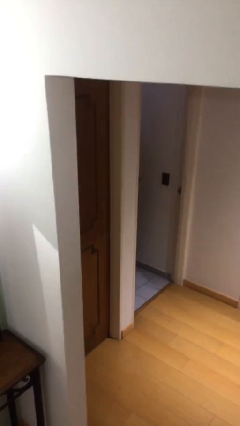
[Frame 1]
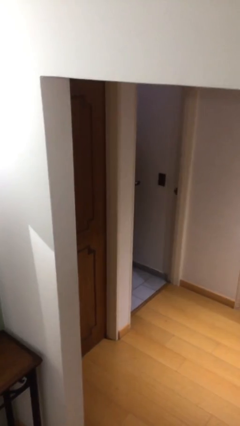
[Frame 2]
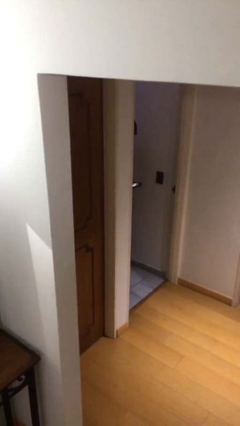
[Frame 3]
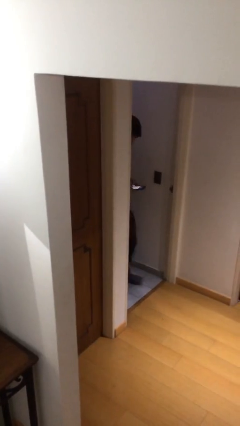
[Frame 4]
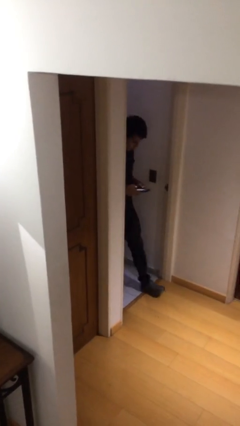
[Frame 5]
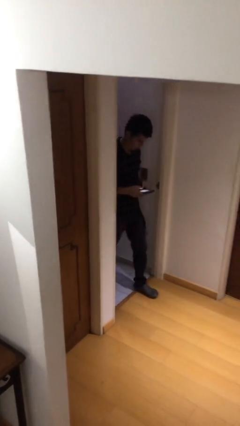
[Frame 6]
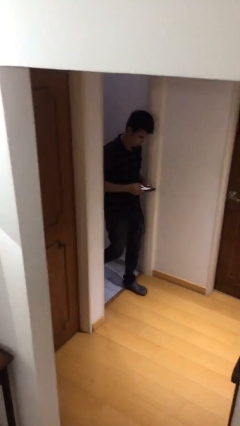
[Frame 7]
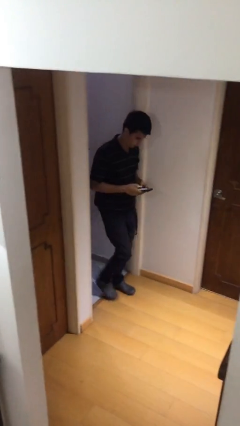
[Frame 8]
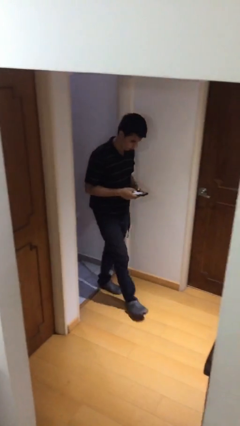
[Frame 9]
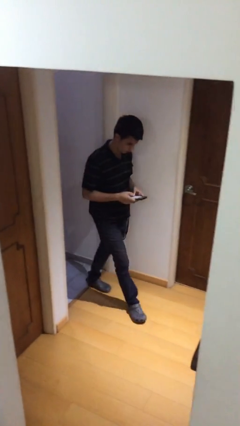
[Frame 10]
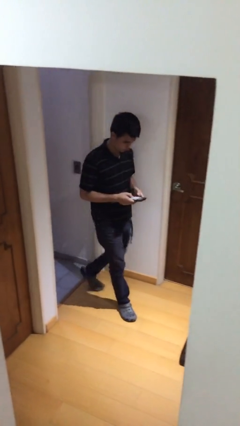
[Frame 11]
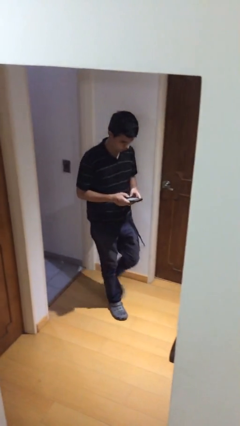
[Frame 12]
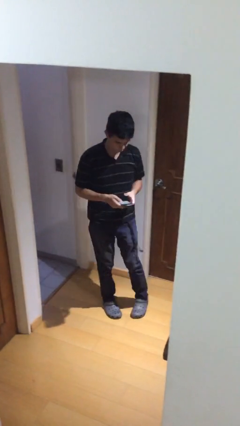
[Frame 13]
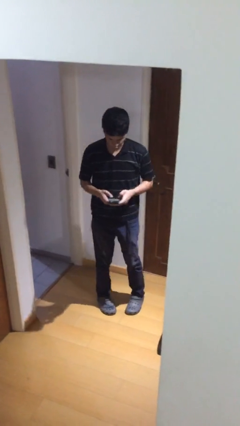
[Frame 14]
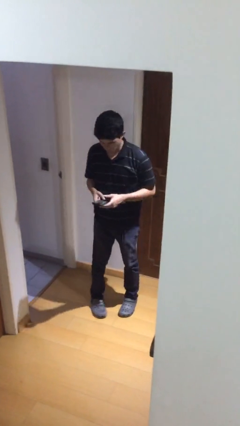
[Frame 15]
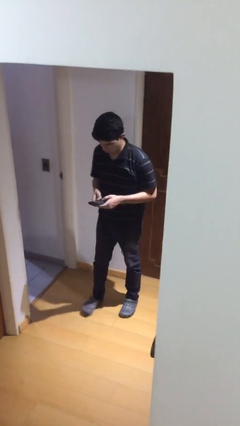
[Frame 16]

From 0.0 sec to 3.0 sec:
person enters scene through structure

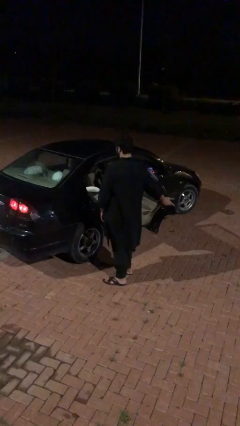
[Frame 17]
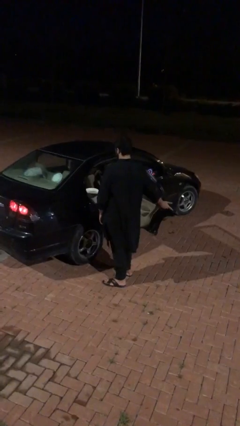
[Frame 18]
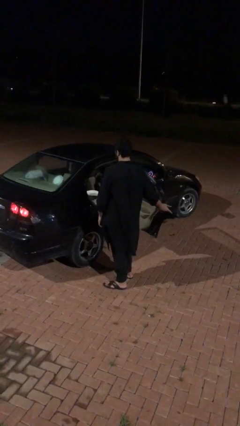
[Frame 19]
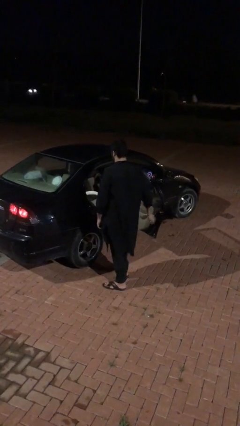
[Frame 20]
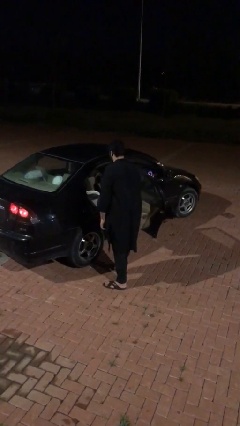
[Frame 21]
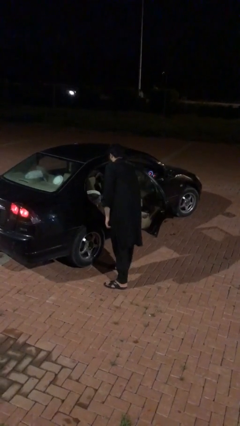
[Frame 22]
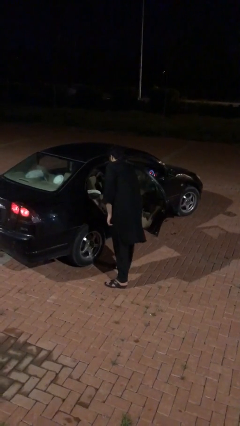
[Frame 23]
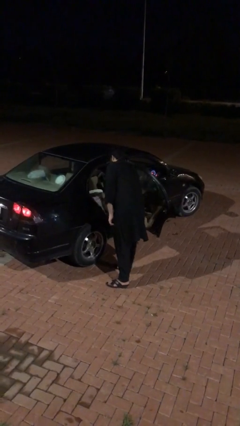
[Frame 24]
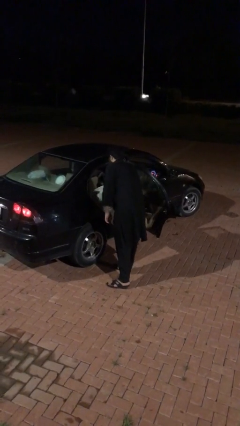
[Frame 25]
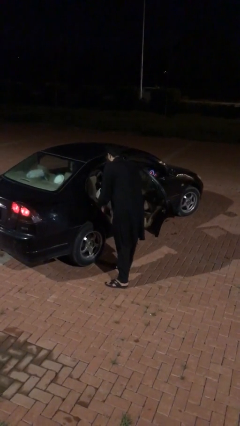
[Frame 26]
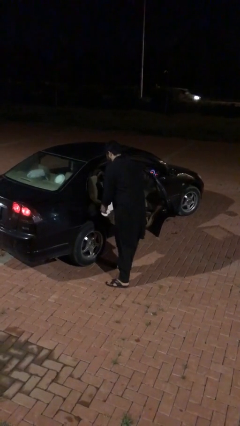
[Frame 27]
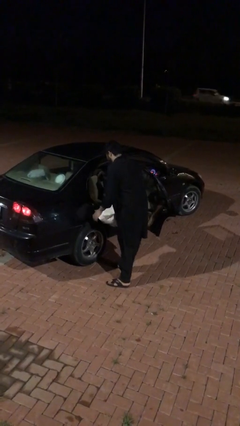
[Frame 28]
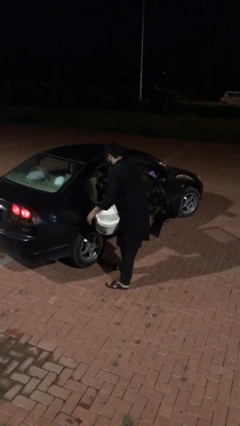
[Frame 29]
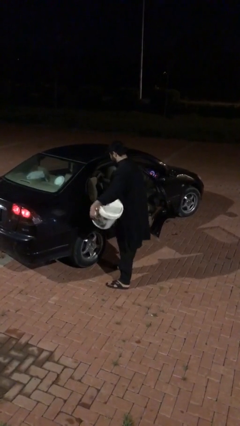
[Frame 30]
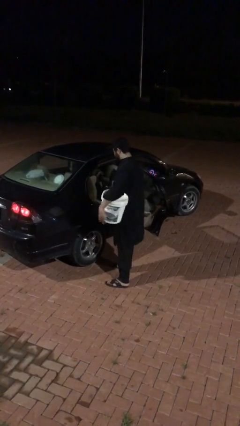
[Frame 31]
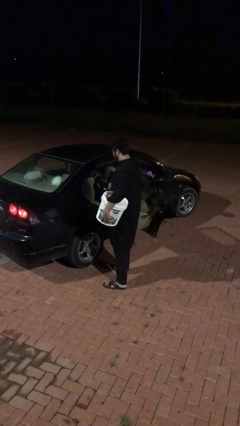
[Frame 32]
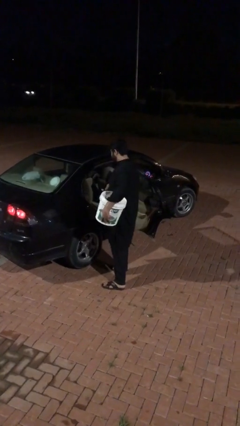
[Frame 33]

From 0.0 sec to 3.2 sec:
person unloads car

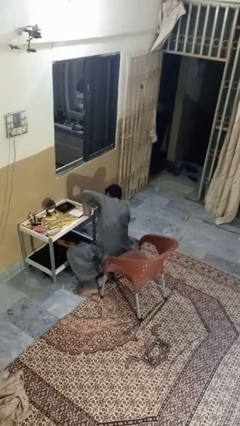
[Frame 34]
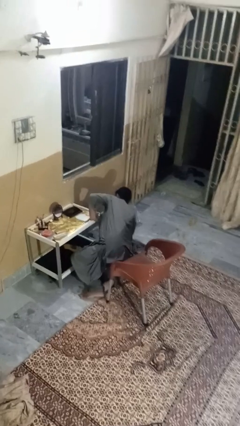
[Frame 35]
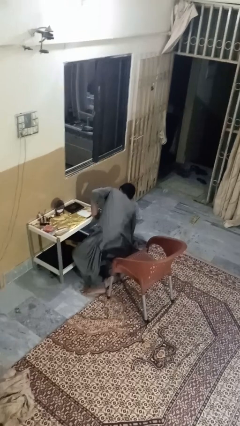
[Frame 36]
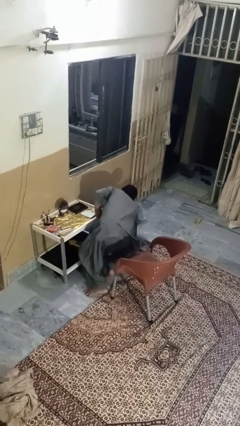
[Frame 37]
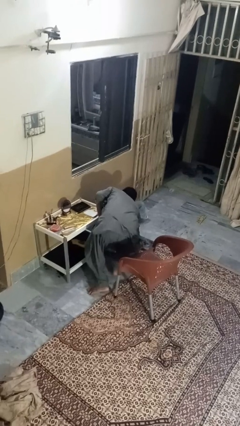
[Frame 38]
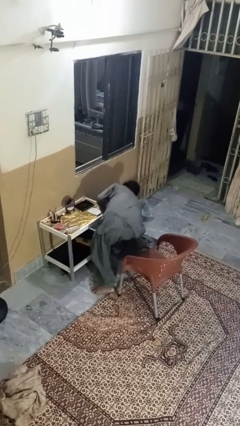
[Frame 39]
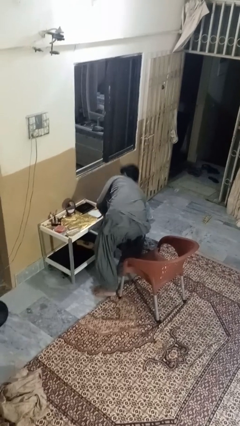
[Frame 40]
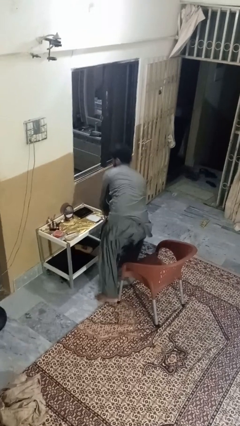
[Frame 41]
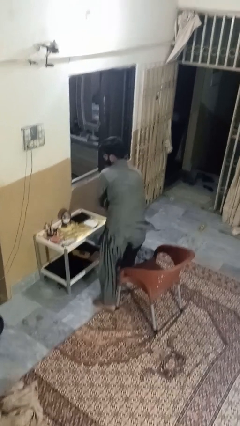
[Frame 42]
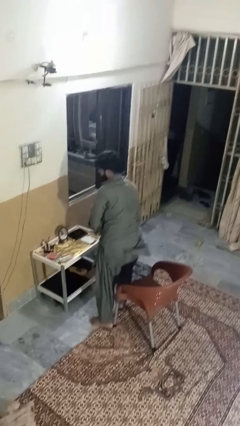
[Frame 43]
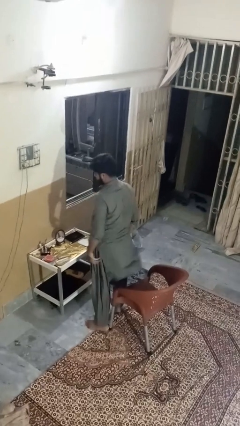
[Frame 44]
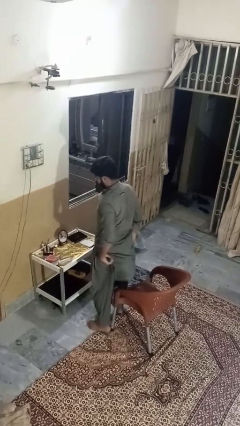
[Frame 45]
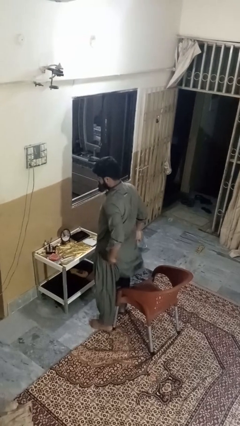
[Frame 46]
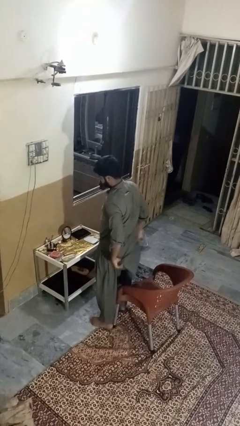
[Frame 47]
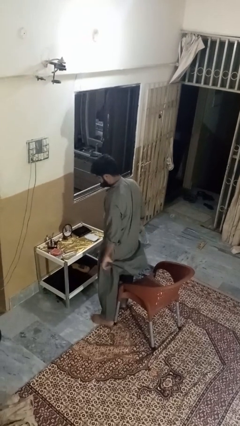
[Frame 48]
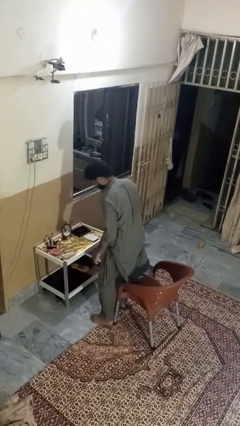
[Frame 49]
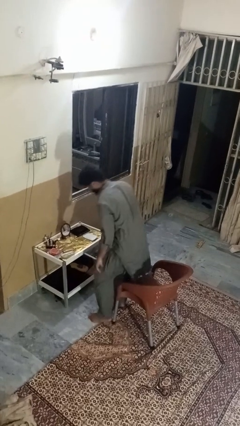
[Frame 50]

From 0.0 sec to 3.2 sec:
person stands up from floor

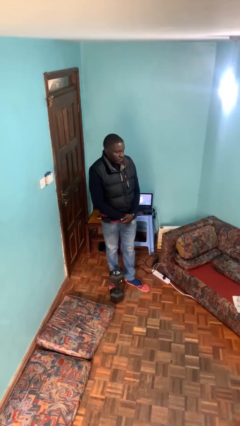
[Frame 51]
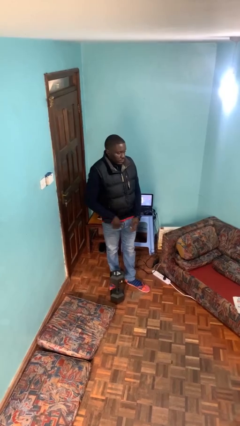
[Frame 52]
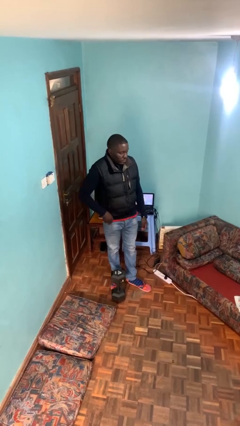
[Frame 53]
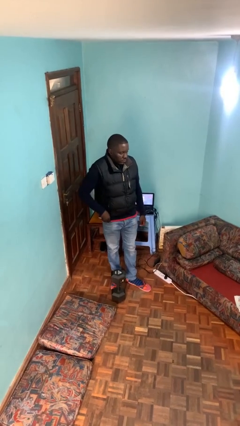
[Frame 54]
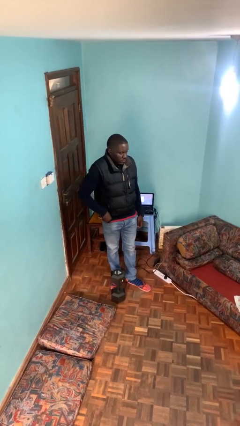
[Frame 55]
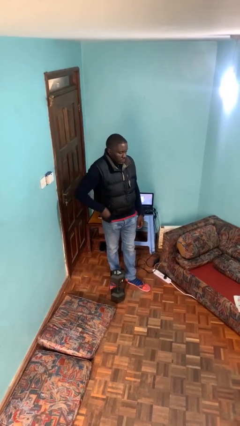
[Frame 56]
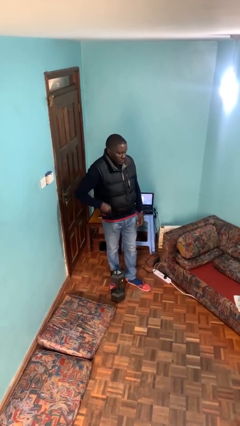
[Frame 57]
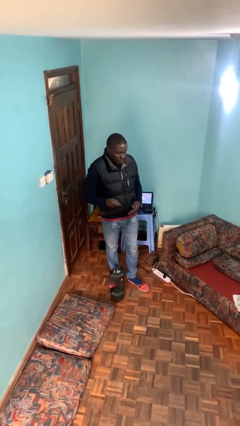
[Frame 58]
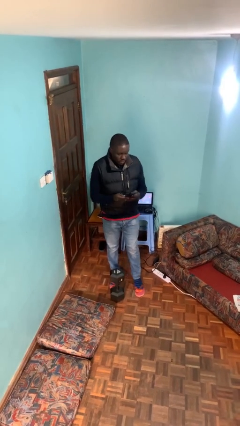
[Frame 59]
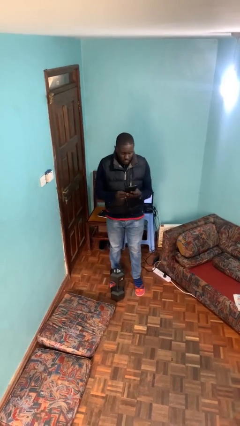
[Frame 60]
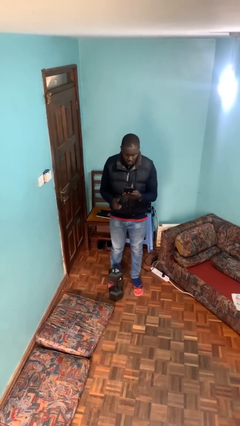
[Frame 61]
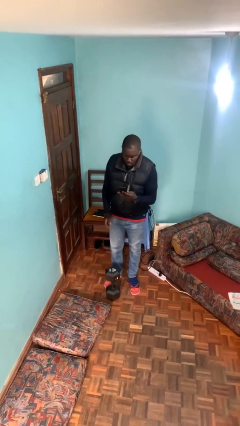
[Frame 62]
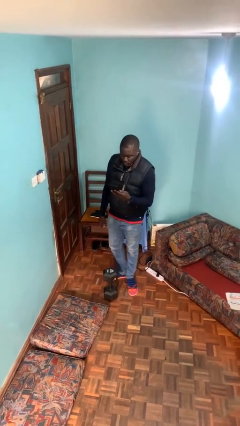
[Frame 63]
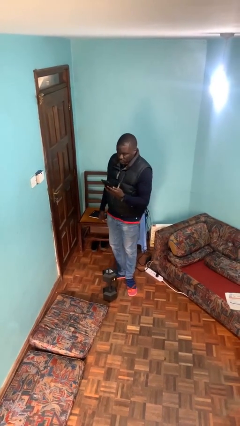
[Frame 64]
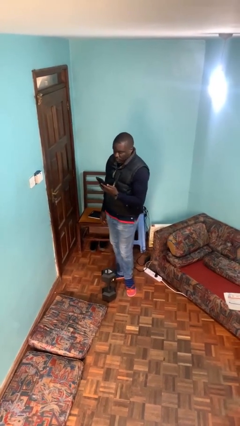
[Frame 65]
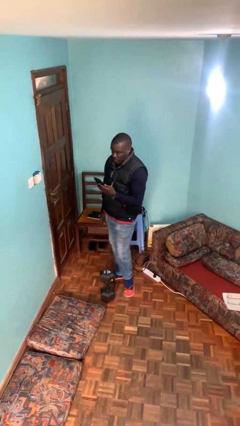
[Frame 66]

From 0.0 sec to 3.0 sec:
person takes phone from pocket

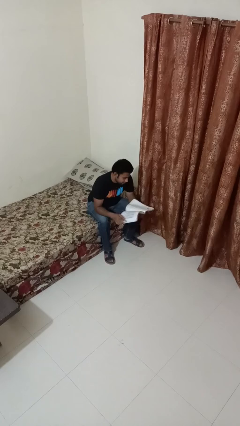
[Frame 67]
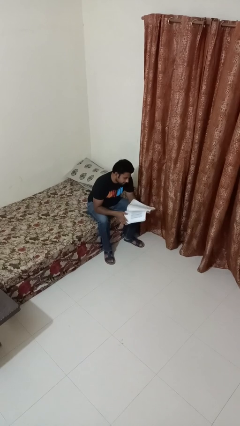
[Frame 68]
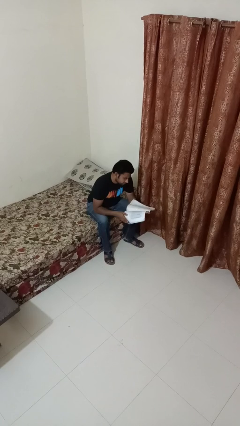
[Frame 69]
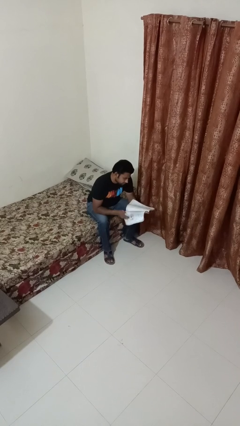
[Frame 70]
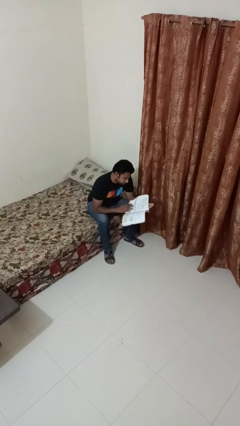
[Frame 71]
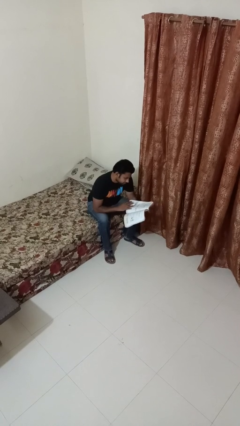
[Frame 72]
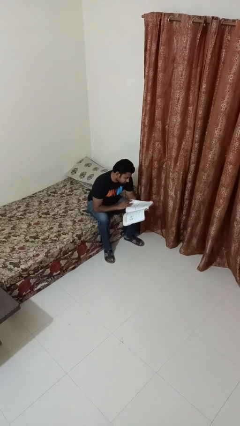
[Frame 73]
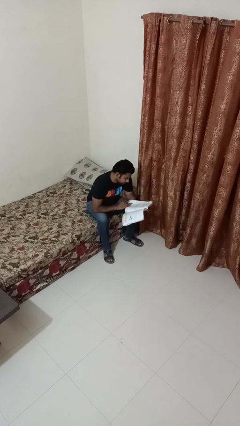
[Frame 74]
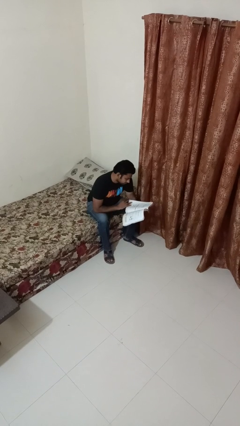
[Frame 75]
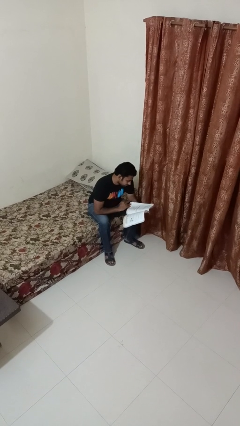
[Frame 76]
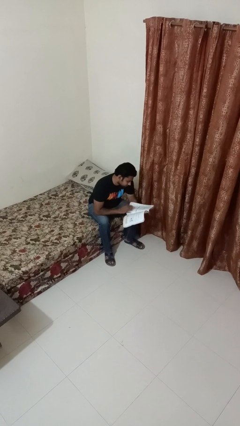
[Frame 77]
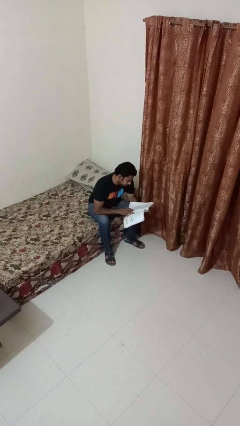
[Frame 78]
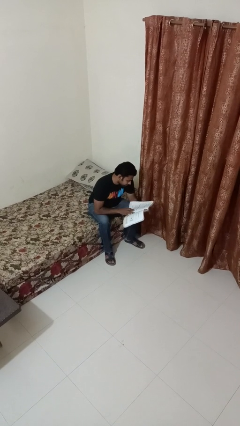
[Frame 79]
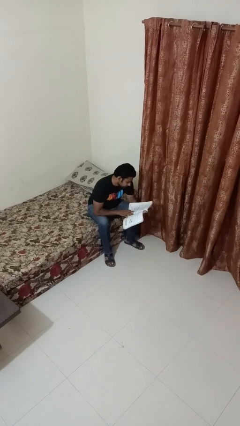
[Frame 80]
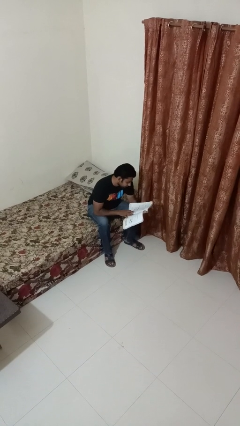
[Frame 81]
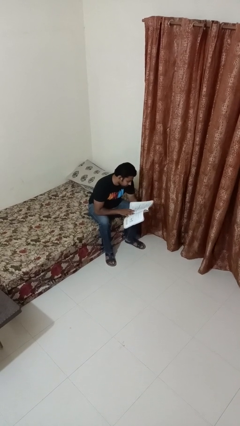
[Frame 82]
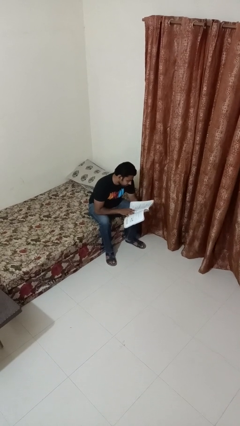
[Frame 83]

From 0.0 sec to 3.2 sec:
person reads book

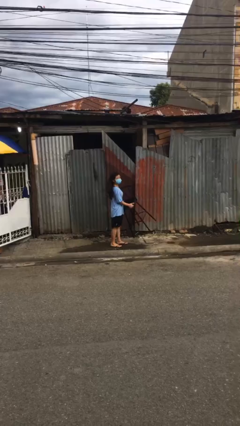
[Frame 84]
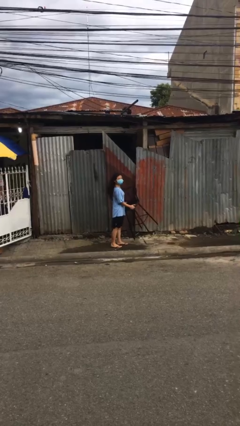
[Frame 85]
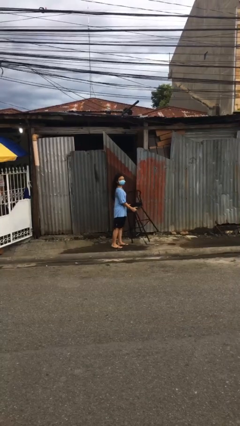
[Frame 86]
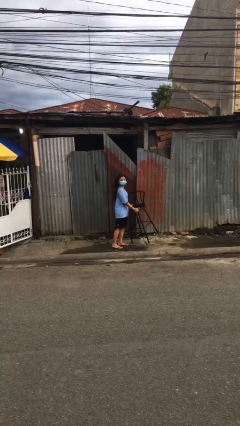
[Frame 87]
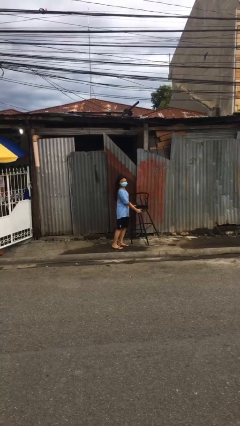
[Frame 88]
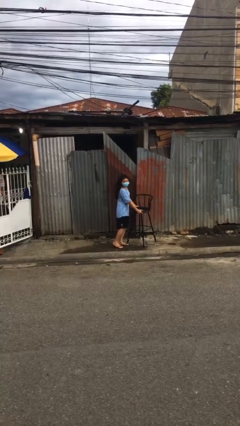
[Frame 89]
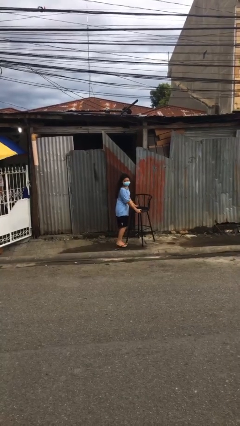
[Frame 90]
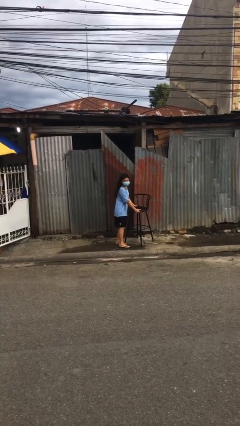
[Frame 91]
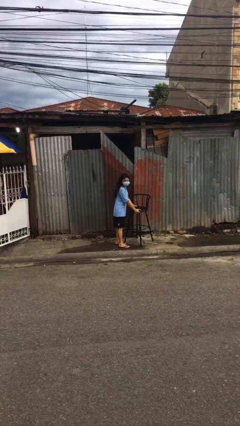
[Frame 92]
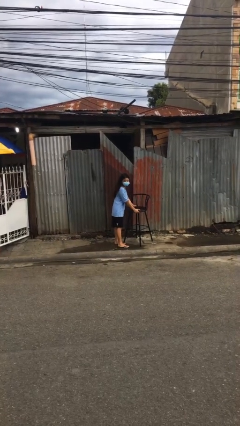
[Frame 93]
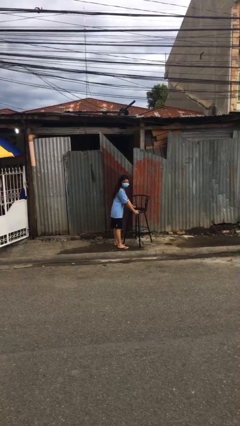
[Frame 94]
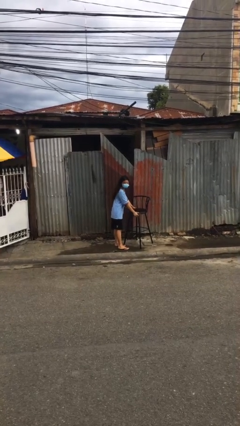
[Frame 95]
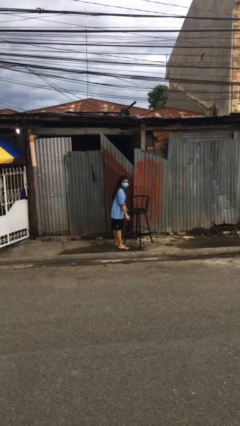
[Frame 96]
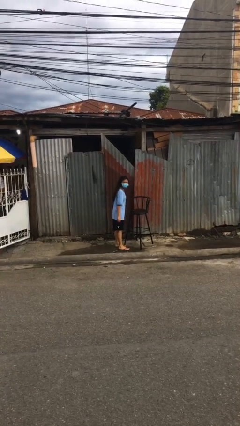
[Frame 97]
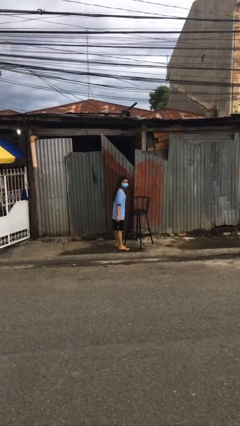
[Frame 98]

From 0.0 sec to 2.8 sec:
person puts down object on floor
